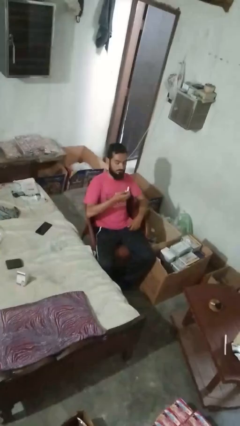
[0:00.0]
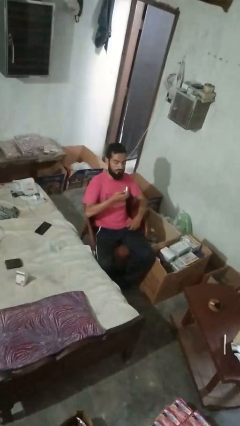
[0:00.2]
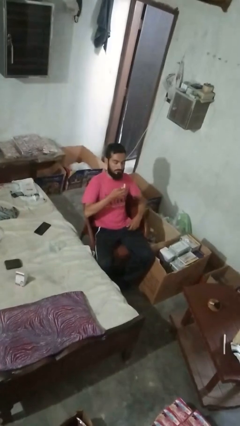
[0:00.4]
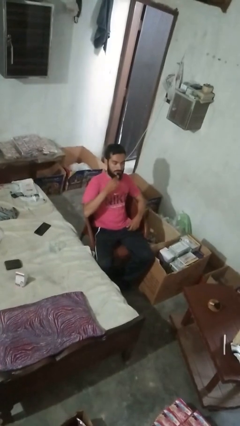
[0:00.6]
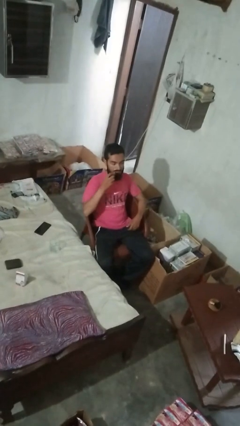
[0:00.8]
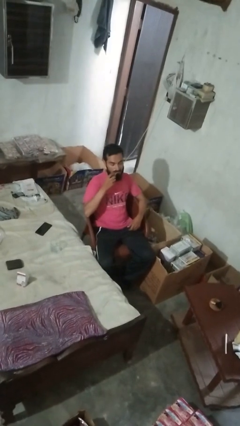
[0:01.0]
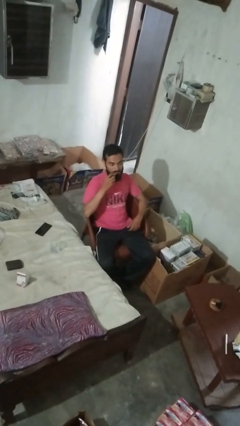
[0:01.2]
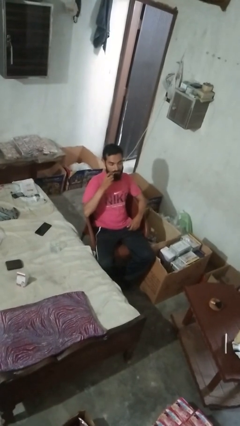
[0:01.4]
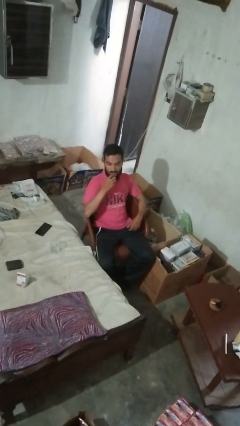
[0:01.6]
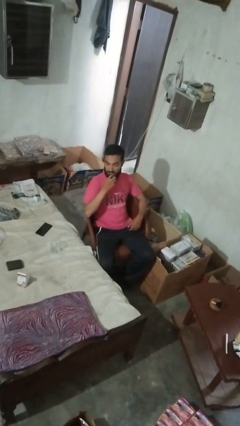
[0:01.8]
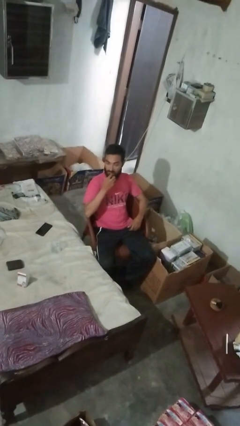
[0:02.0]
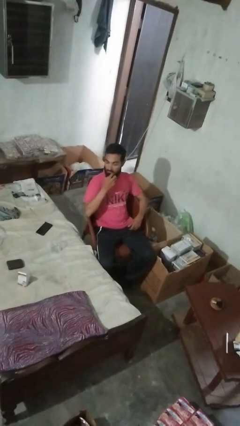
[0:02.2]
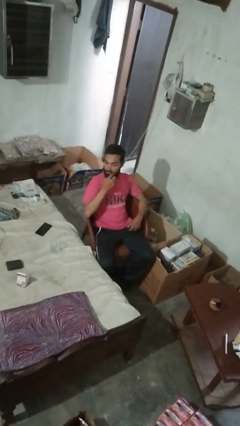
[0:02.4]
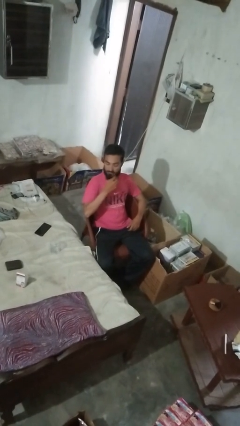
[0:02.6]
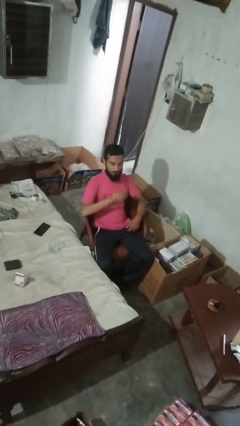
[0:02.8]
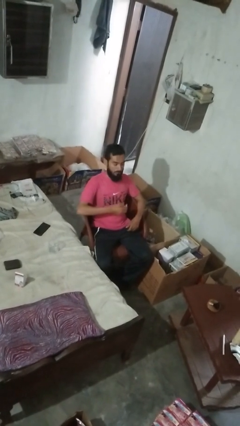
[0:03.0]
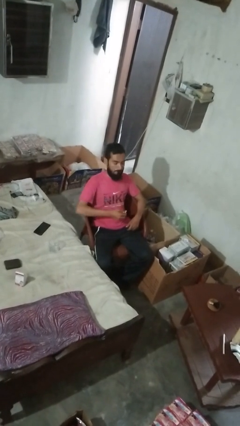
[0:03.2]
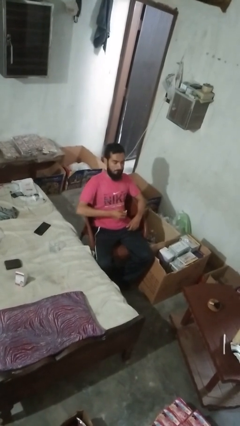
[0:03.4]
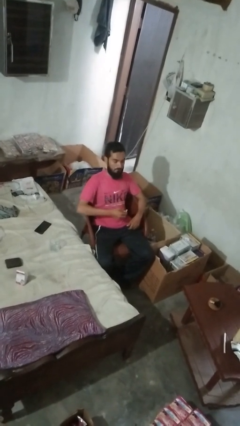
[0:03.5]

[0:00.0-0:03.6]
person applies lip makeup

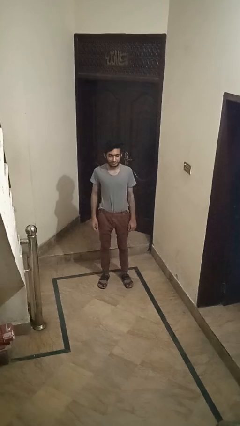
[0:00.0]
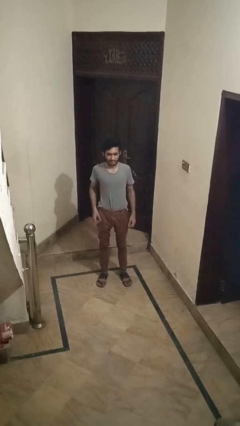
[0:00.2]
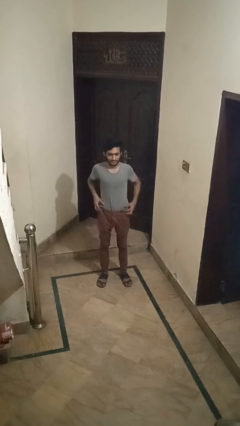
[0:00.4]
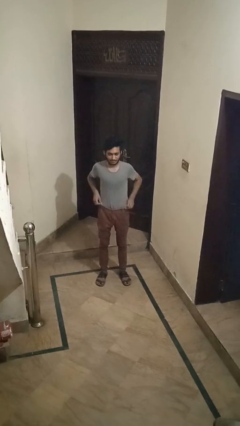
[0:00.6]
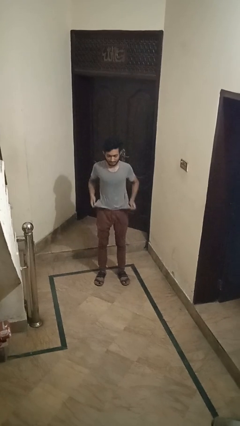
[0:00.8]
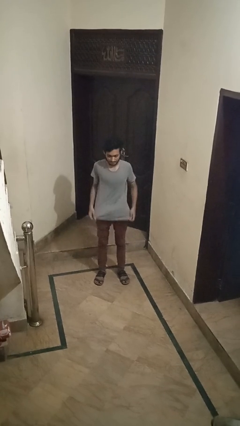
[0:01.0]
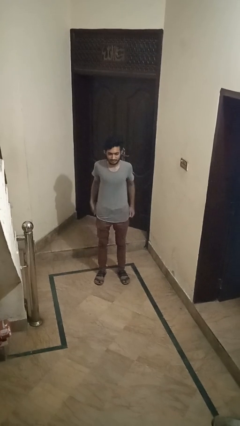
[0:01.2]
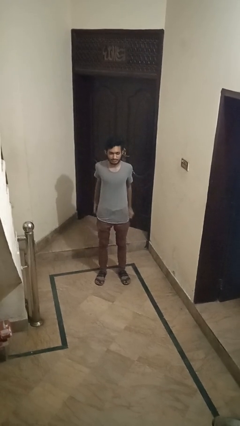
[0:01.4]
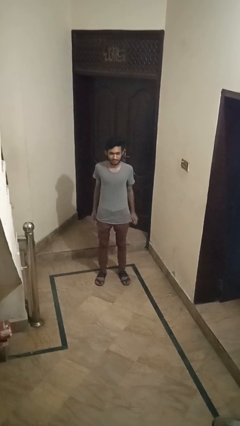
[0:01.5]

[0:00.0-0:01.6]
person untucks shirt

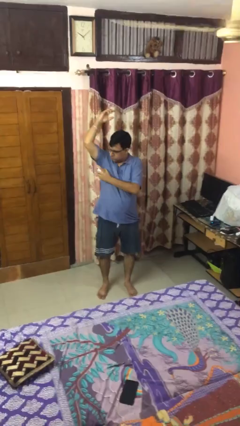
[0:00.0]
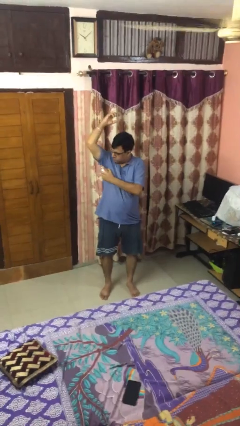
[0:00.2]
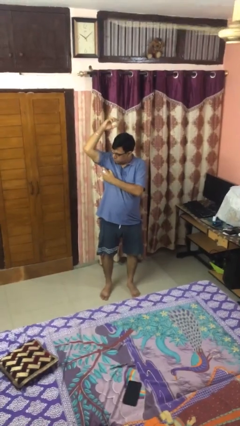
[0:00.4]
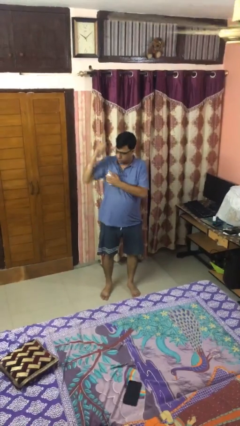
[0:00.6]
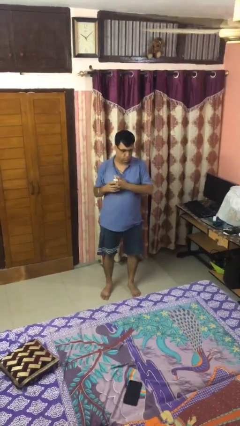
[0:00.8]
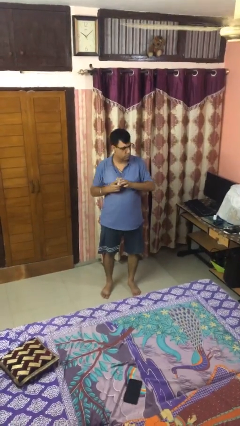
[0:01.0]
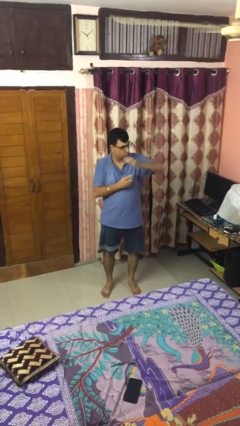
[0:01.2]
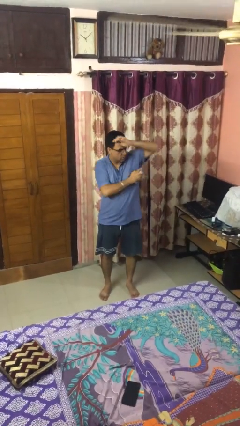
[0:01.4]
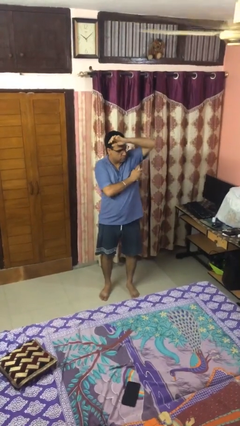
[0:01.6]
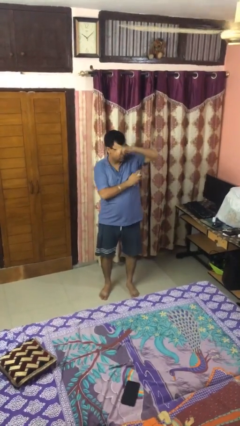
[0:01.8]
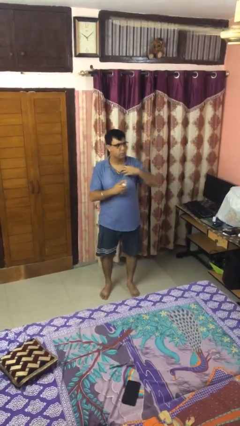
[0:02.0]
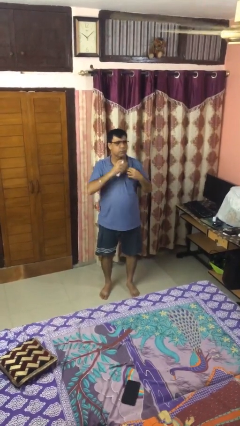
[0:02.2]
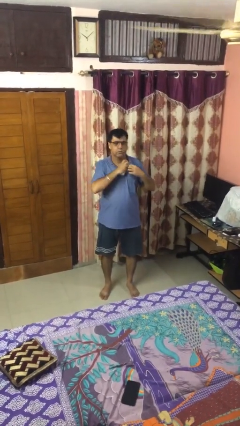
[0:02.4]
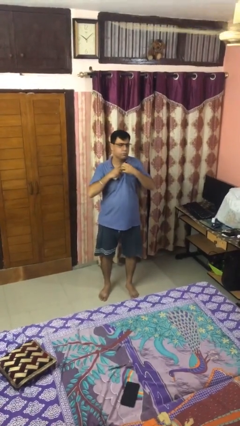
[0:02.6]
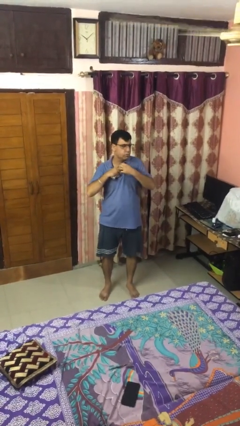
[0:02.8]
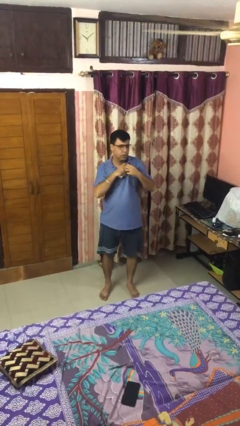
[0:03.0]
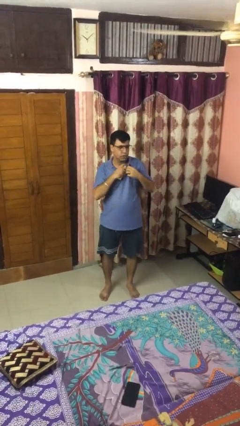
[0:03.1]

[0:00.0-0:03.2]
person applies deodorant

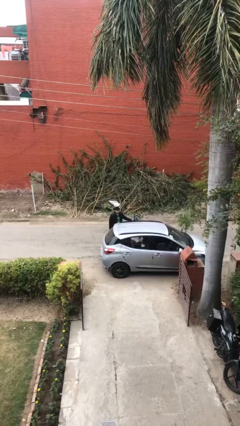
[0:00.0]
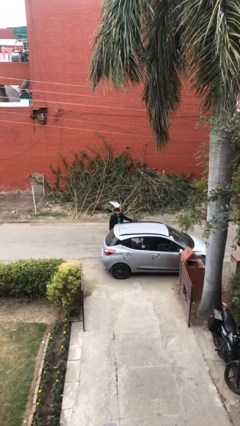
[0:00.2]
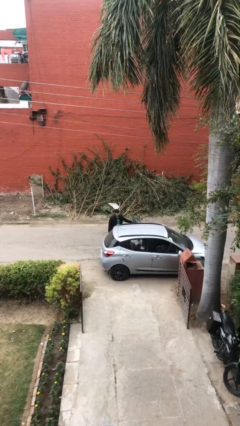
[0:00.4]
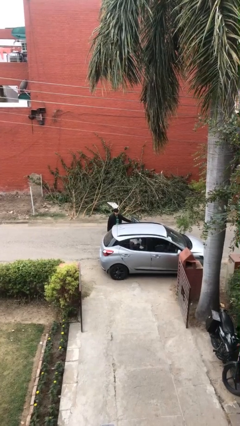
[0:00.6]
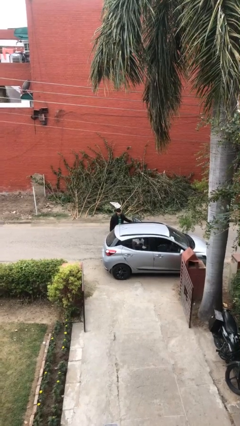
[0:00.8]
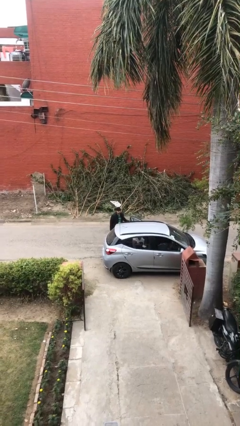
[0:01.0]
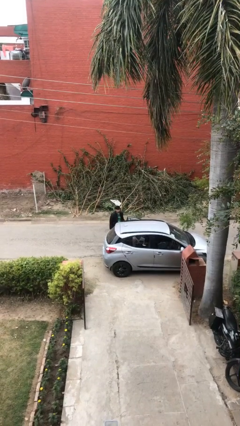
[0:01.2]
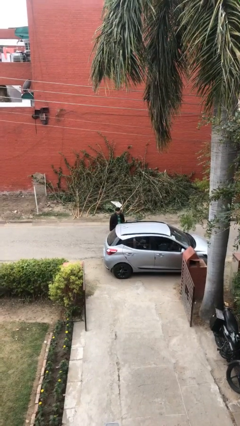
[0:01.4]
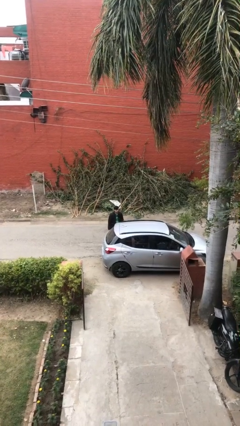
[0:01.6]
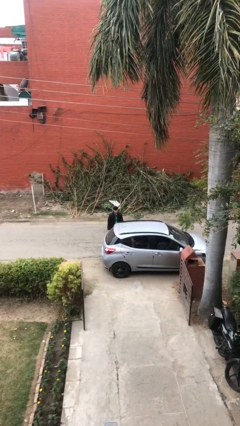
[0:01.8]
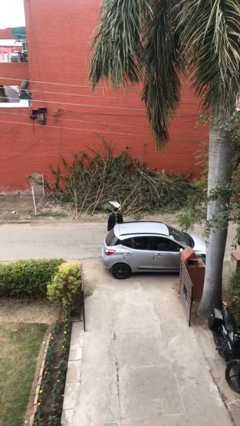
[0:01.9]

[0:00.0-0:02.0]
person closes car door

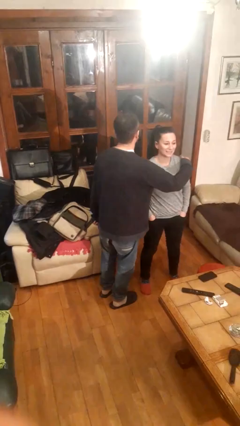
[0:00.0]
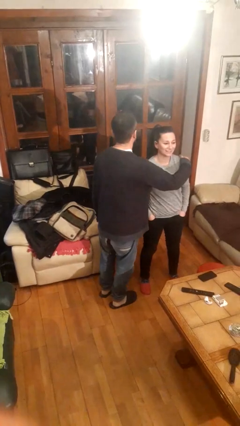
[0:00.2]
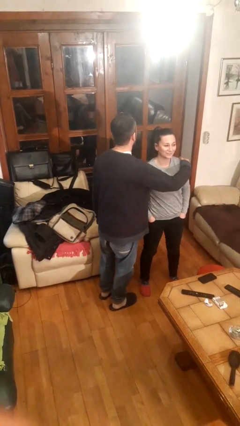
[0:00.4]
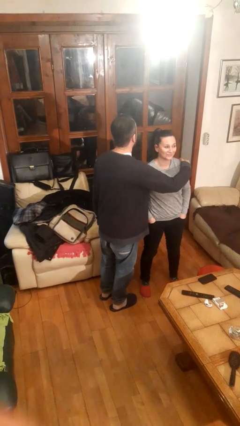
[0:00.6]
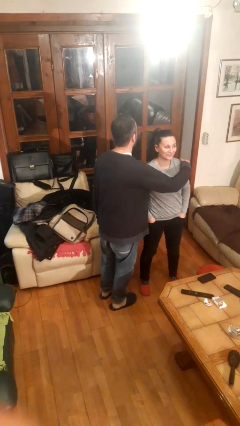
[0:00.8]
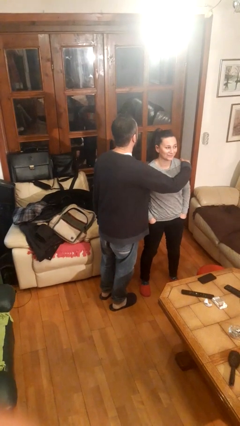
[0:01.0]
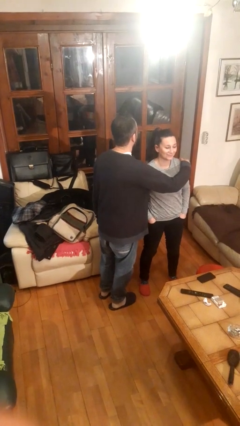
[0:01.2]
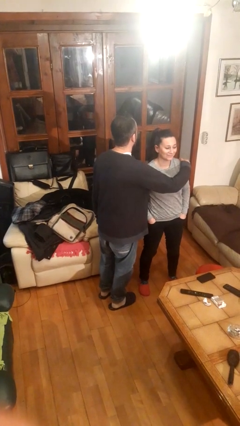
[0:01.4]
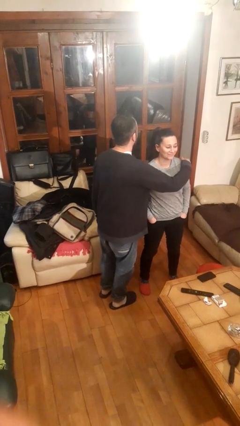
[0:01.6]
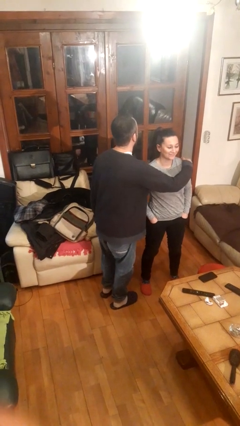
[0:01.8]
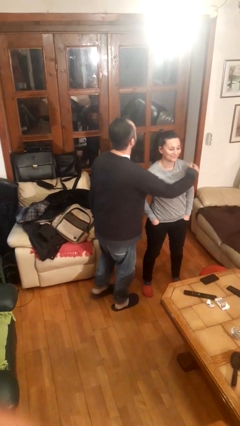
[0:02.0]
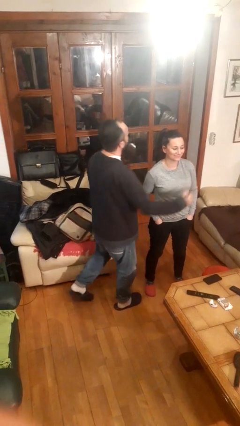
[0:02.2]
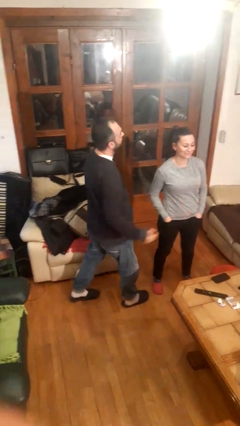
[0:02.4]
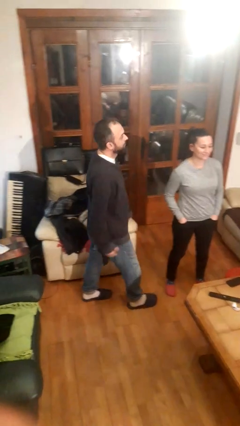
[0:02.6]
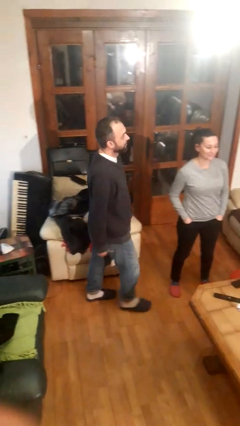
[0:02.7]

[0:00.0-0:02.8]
person hugs person from side

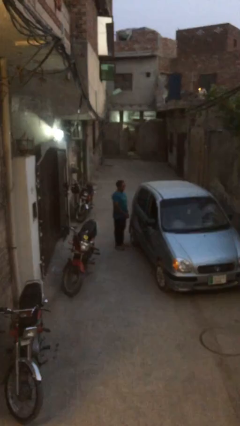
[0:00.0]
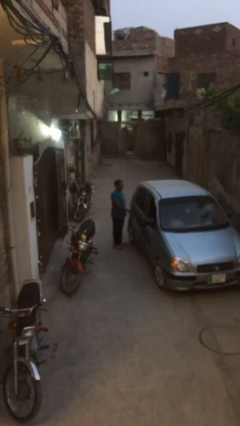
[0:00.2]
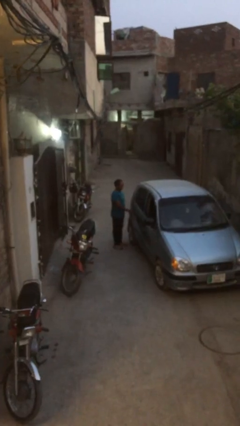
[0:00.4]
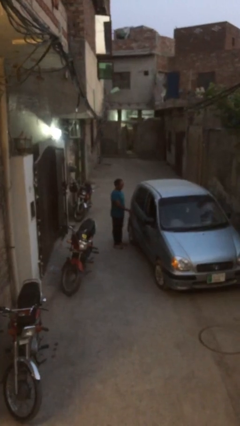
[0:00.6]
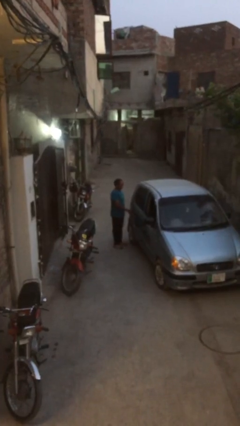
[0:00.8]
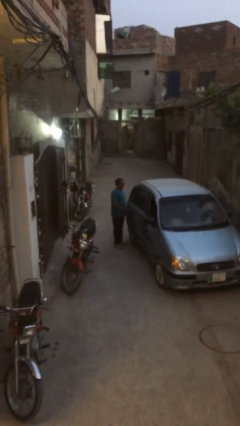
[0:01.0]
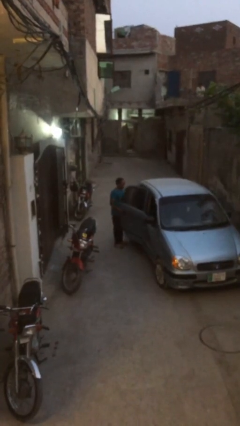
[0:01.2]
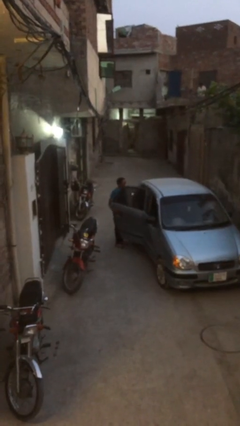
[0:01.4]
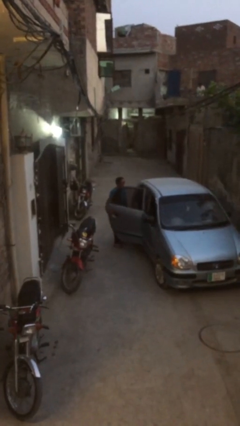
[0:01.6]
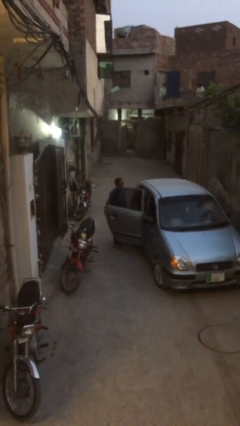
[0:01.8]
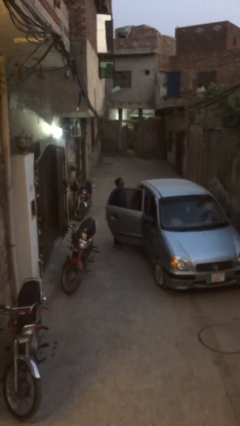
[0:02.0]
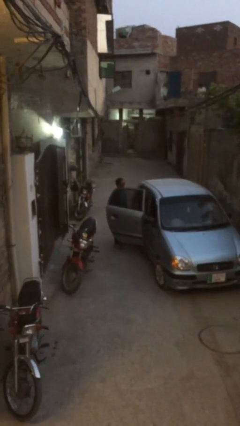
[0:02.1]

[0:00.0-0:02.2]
person opens car door

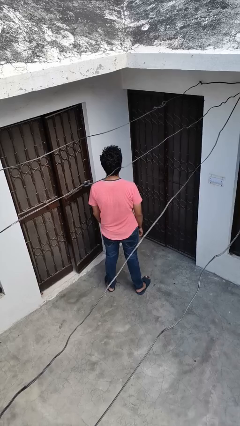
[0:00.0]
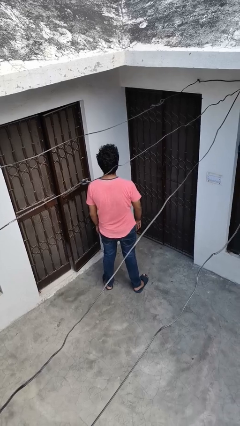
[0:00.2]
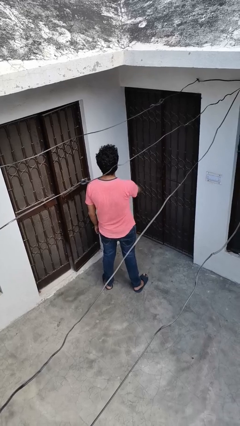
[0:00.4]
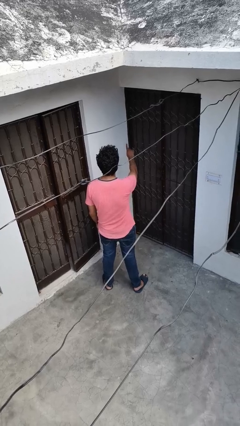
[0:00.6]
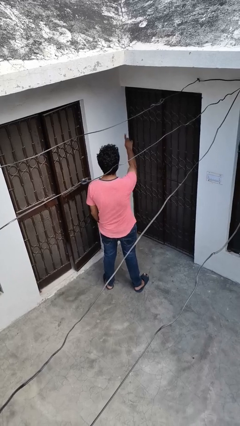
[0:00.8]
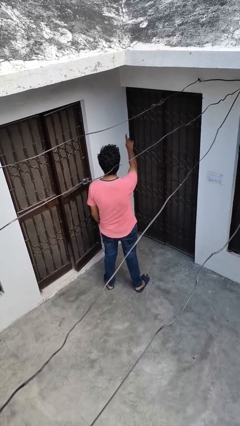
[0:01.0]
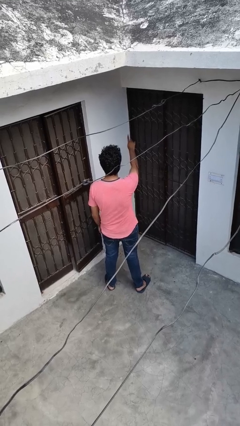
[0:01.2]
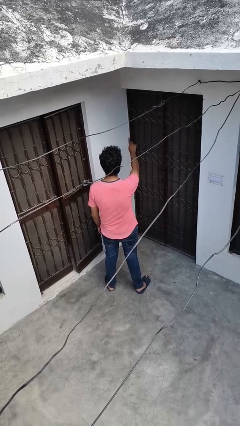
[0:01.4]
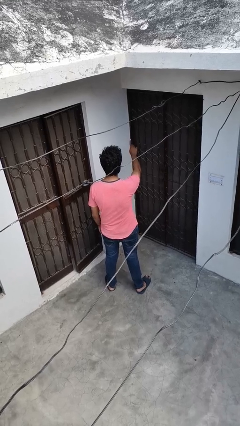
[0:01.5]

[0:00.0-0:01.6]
person gestures number one
